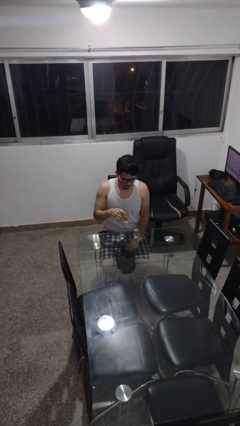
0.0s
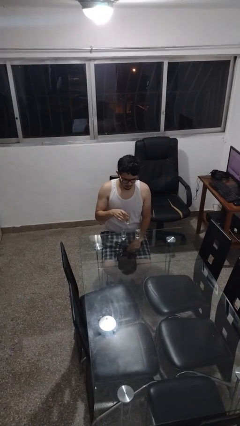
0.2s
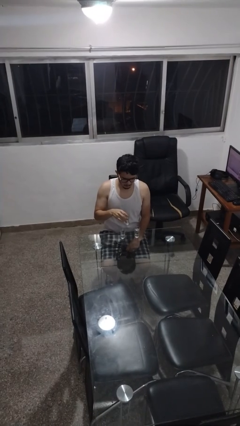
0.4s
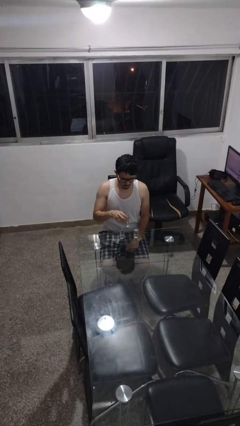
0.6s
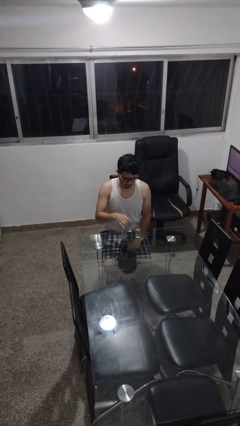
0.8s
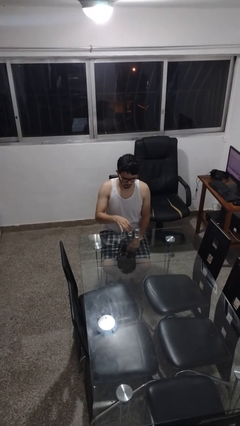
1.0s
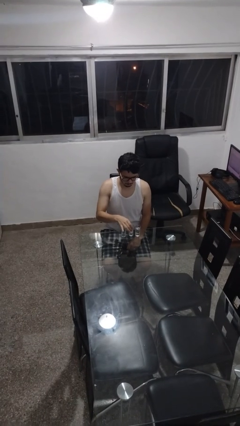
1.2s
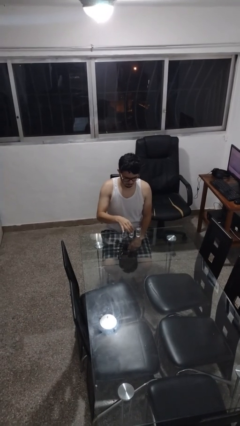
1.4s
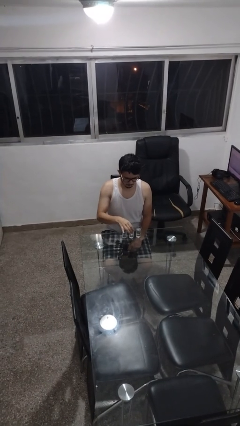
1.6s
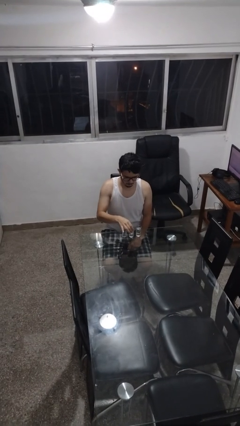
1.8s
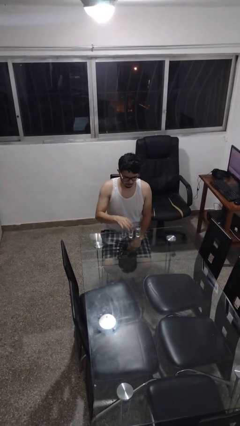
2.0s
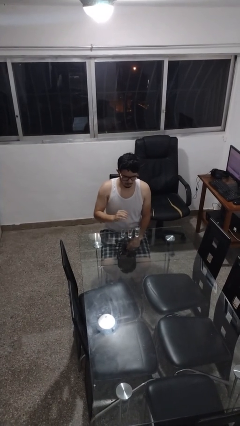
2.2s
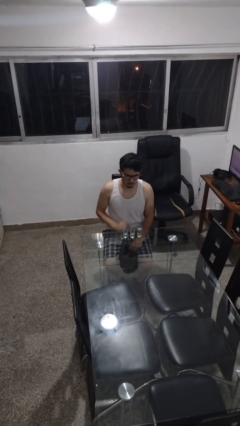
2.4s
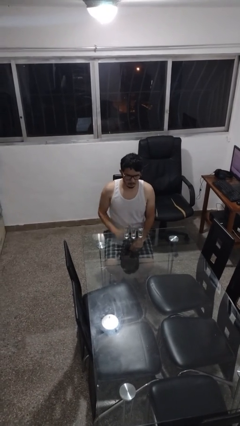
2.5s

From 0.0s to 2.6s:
person puts down object on table

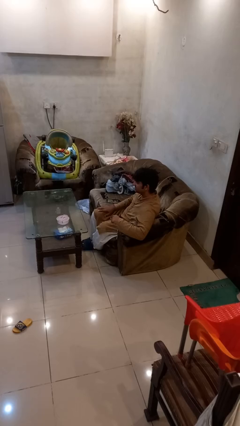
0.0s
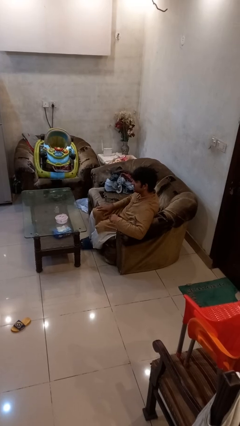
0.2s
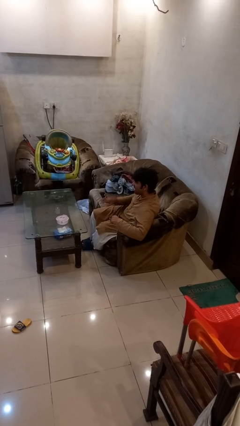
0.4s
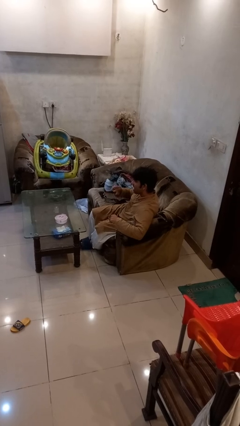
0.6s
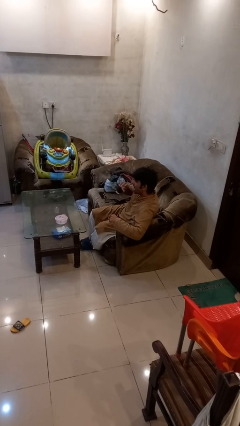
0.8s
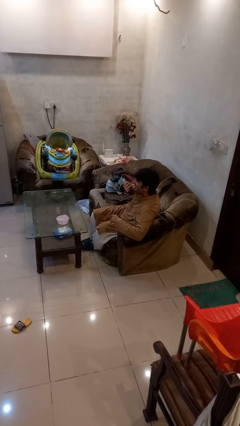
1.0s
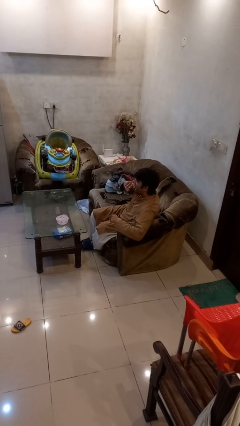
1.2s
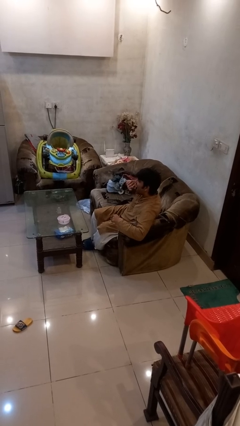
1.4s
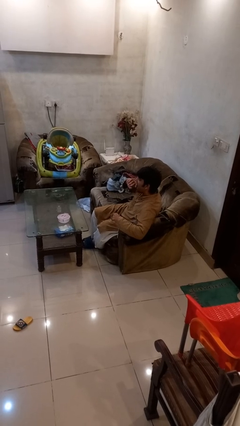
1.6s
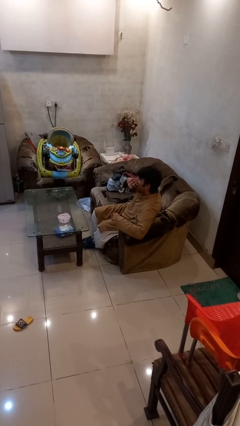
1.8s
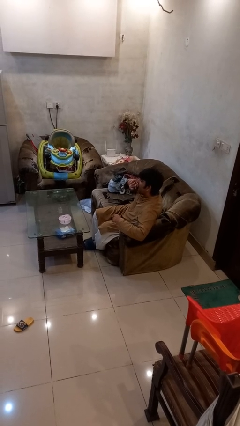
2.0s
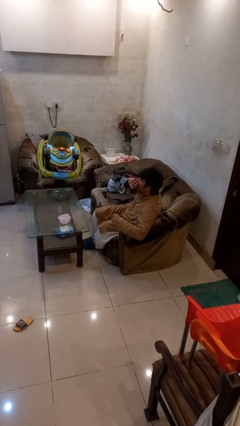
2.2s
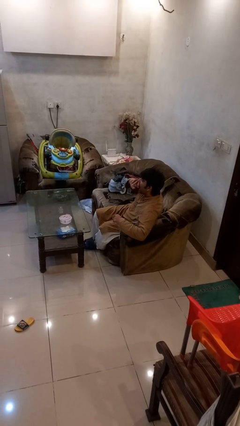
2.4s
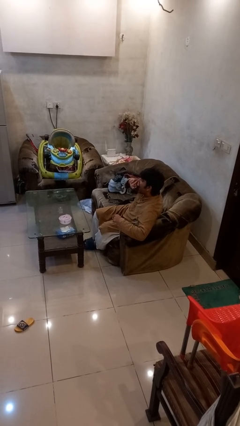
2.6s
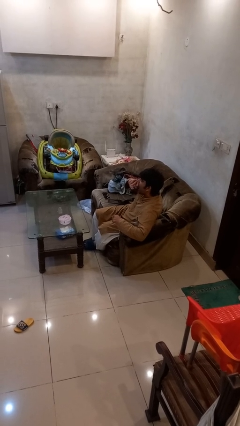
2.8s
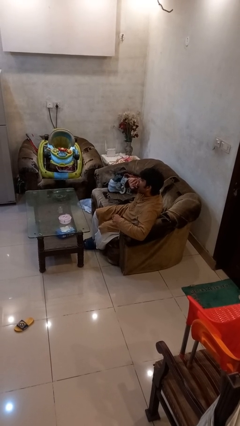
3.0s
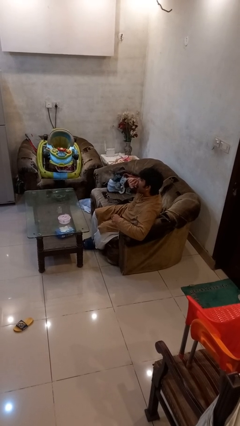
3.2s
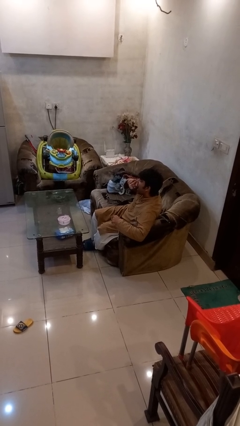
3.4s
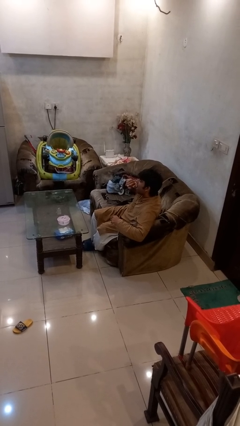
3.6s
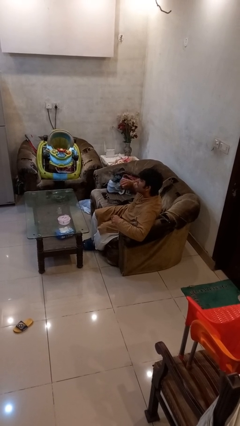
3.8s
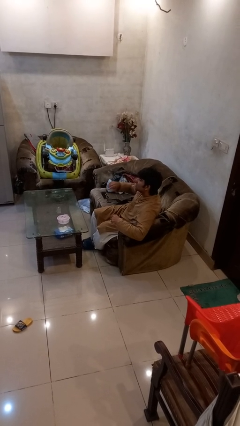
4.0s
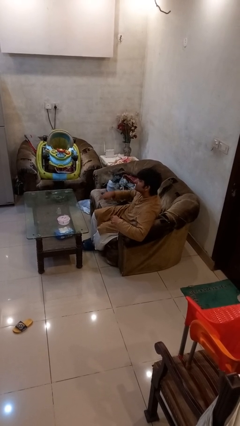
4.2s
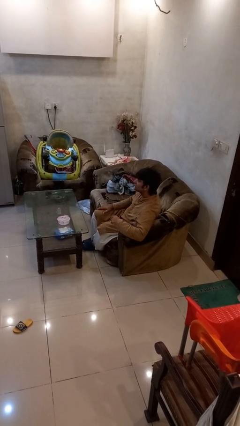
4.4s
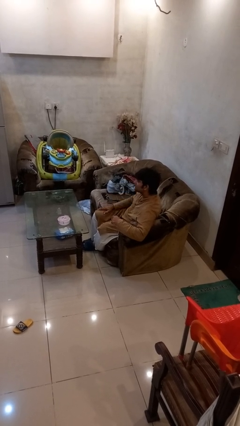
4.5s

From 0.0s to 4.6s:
person yawns

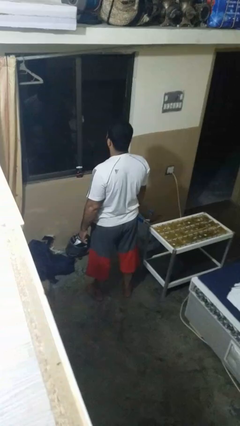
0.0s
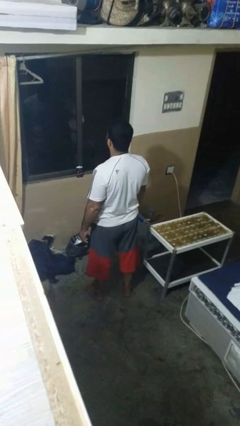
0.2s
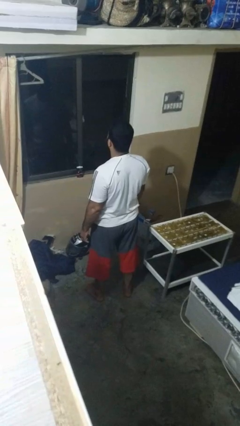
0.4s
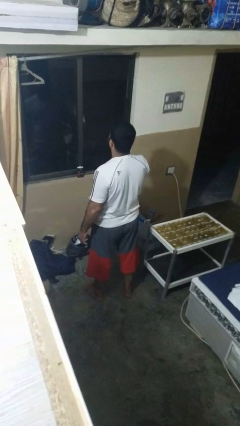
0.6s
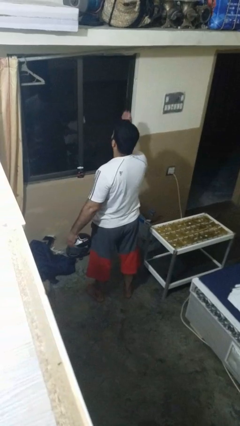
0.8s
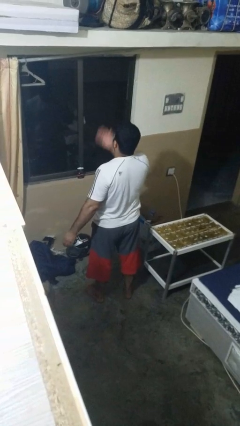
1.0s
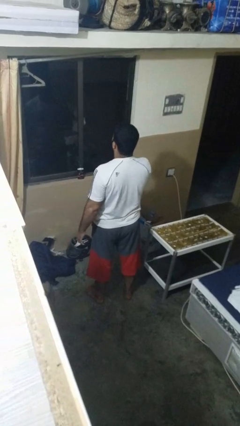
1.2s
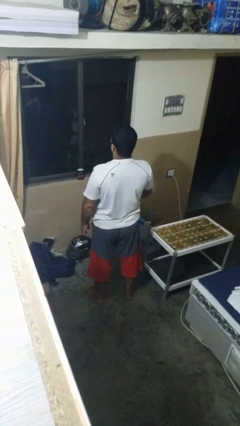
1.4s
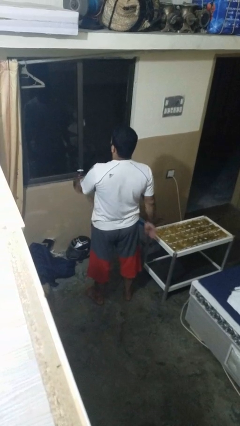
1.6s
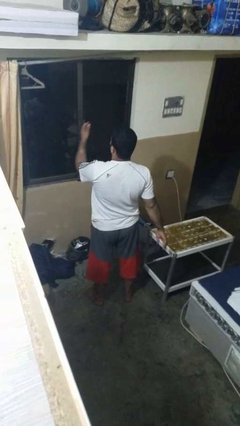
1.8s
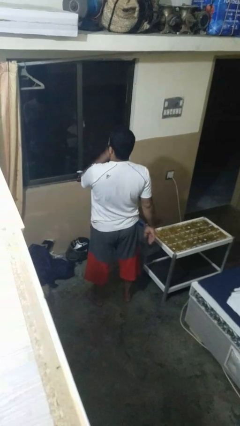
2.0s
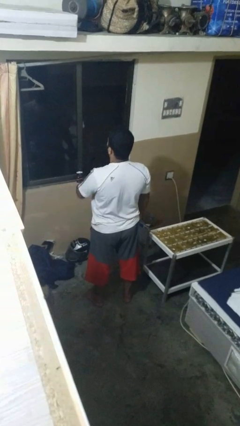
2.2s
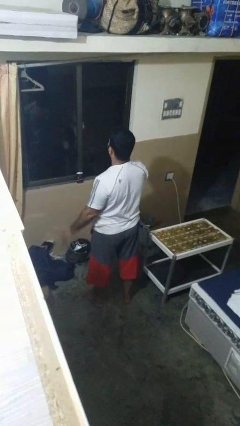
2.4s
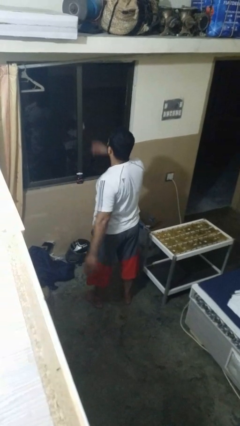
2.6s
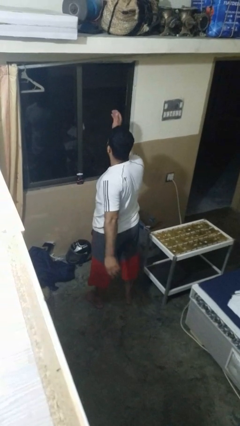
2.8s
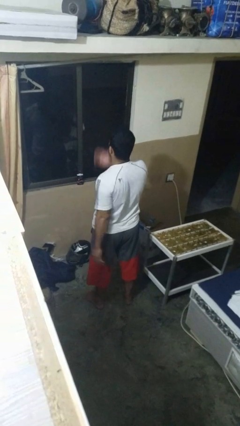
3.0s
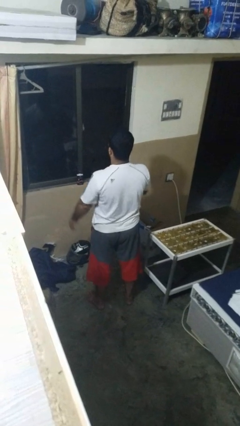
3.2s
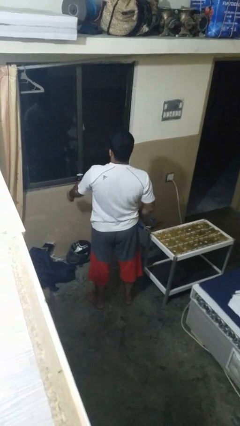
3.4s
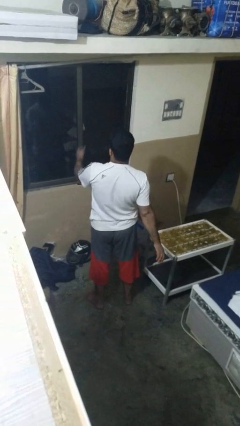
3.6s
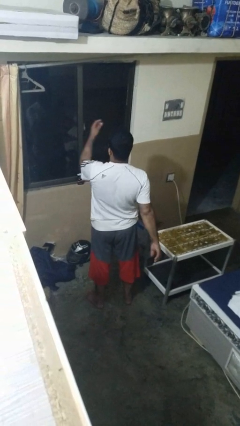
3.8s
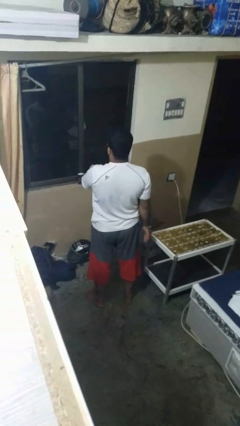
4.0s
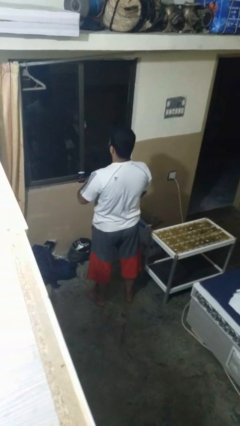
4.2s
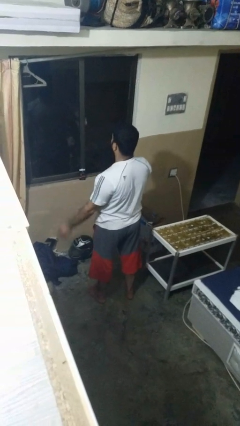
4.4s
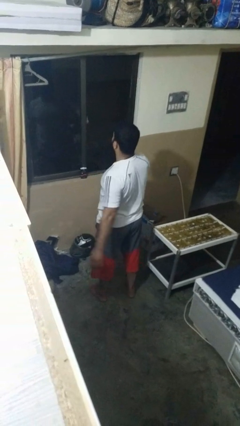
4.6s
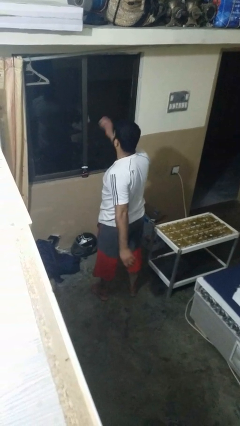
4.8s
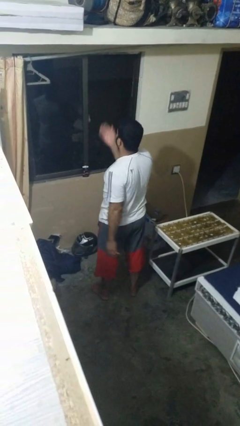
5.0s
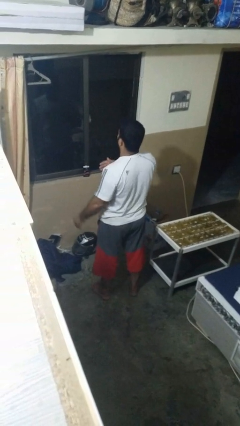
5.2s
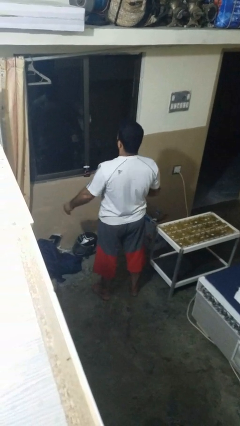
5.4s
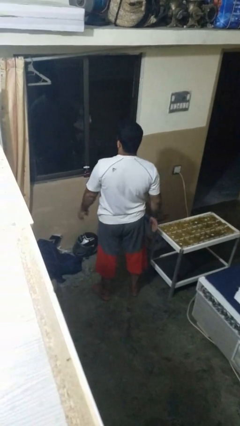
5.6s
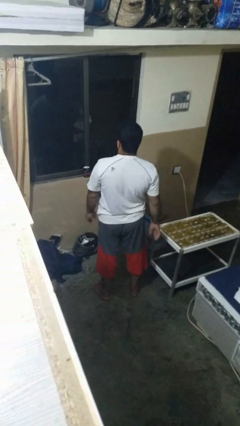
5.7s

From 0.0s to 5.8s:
person drums on chest

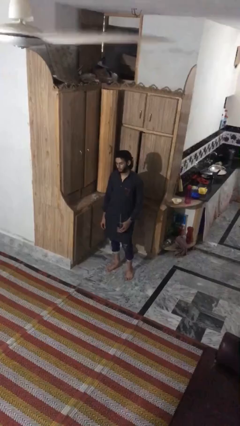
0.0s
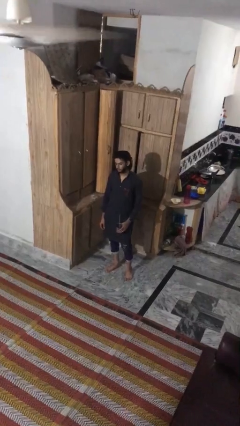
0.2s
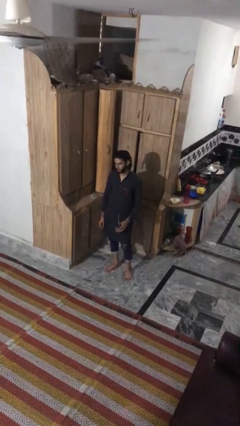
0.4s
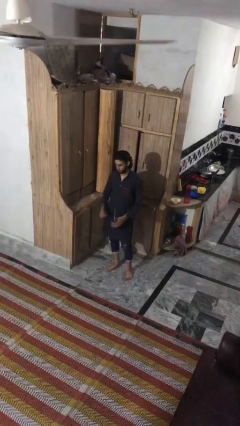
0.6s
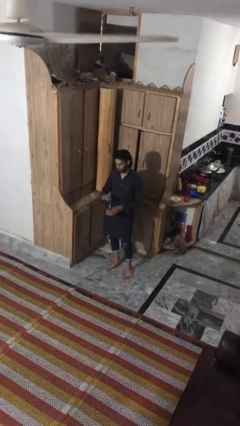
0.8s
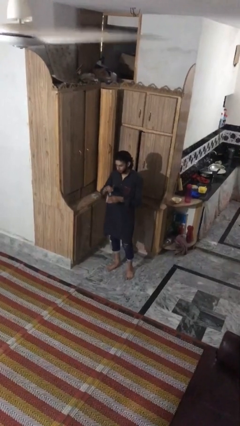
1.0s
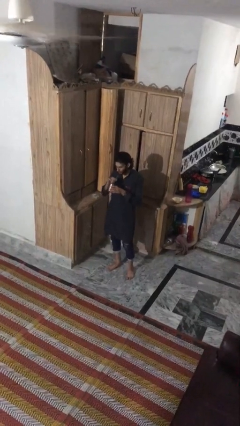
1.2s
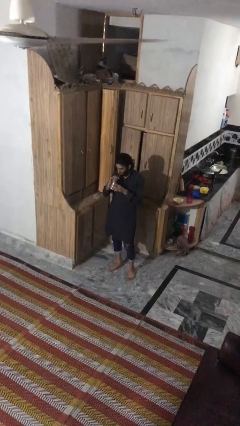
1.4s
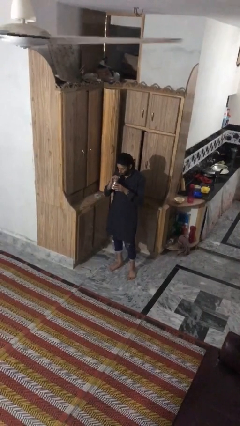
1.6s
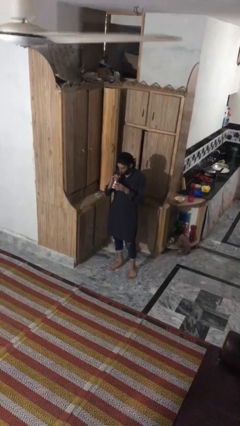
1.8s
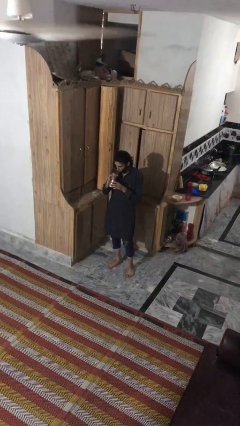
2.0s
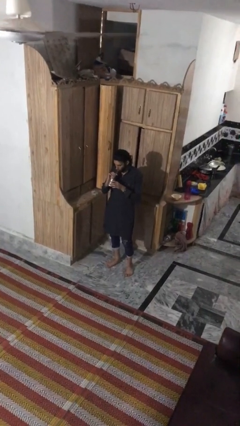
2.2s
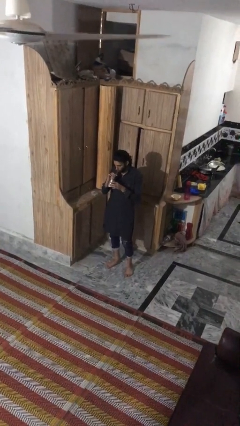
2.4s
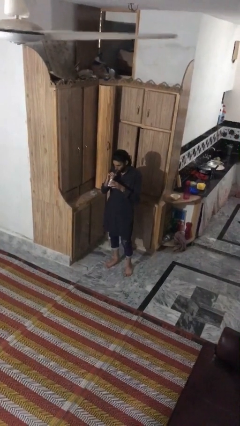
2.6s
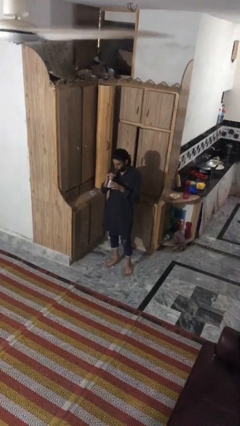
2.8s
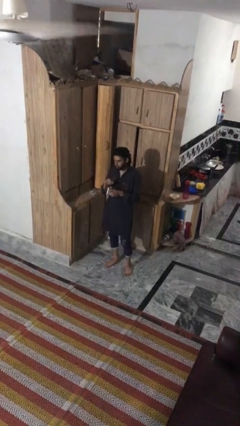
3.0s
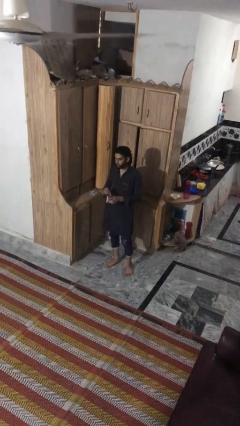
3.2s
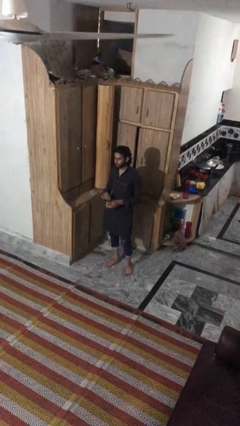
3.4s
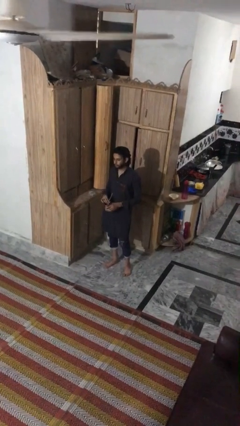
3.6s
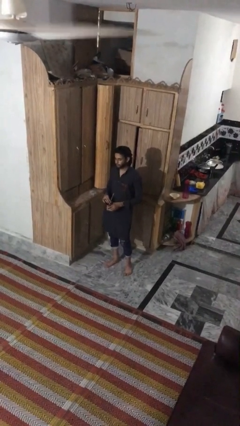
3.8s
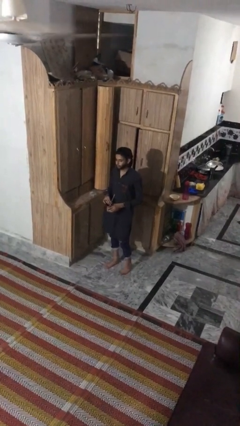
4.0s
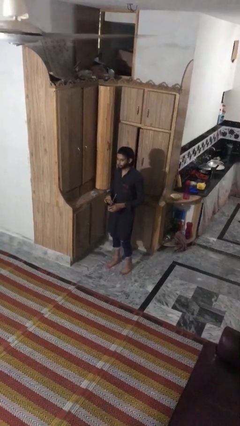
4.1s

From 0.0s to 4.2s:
person drinks from straw

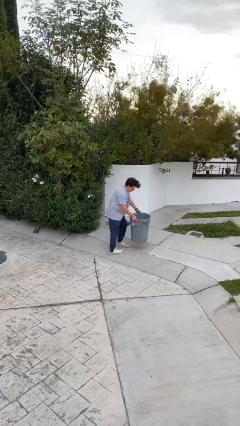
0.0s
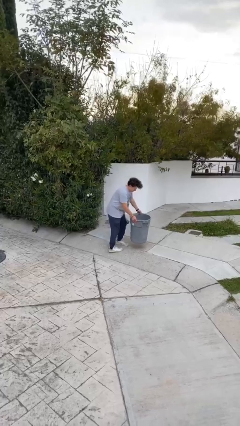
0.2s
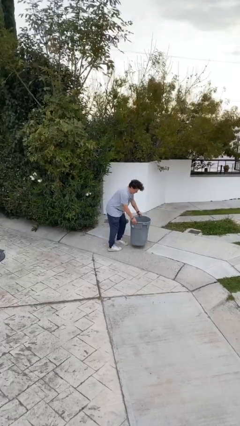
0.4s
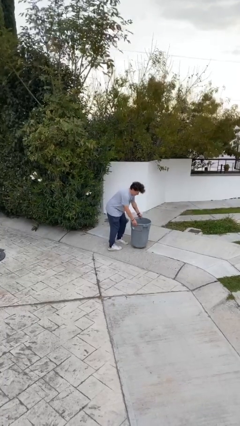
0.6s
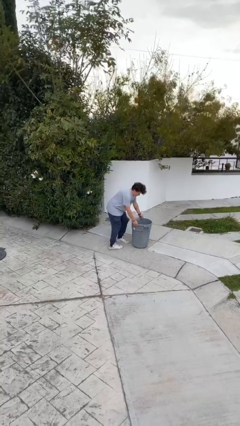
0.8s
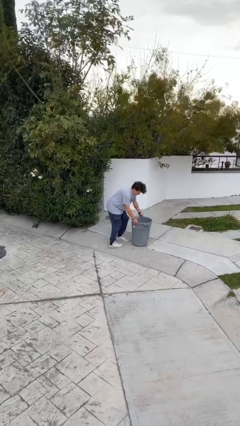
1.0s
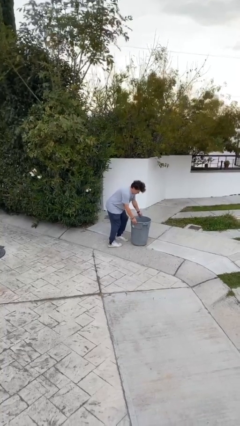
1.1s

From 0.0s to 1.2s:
person puts down object on floor
